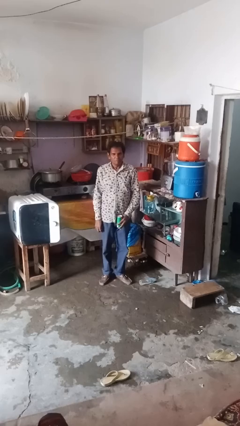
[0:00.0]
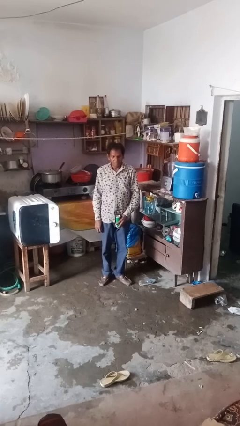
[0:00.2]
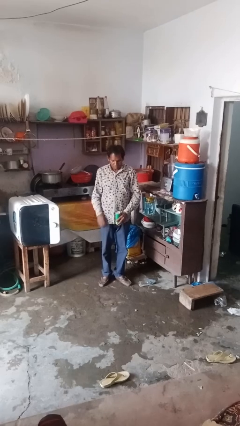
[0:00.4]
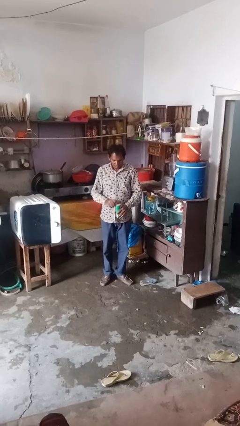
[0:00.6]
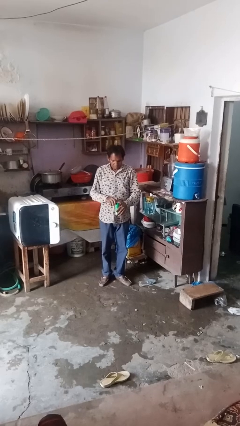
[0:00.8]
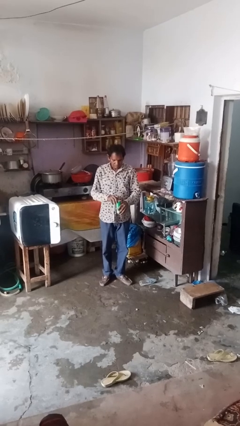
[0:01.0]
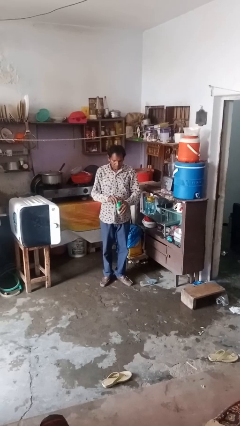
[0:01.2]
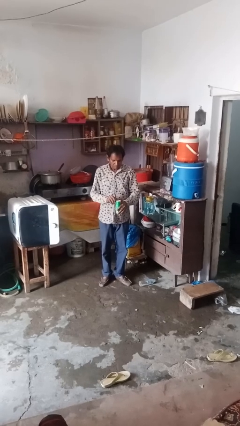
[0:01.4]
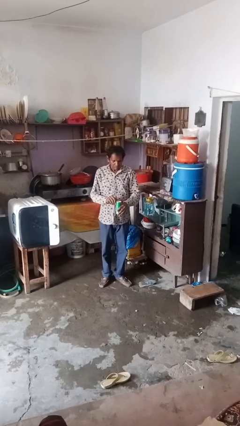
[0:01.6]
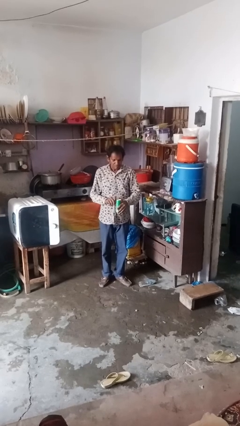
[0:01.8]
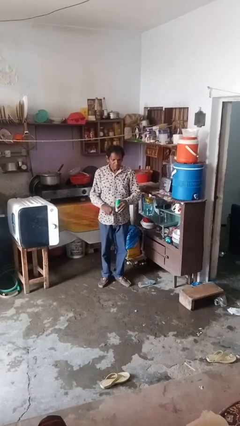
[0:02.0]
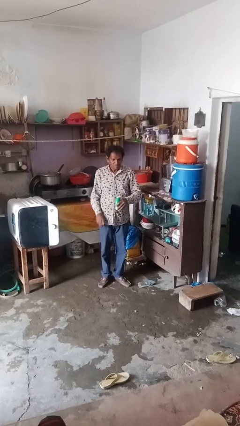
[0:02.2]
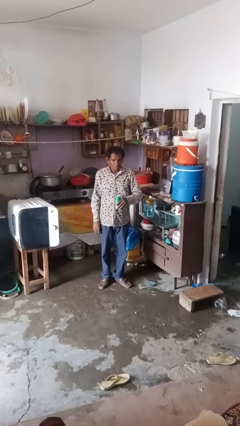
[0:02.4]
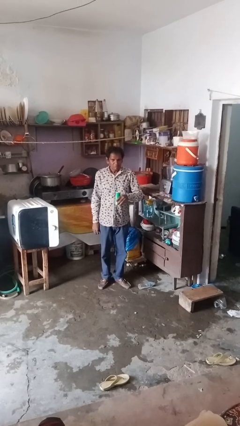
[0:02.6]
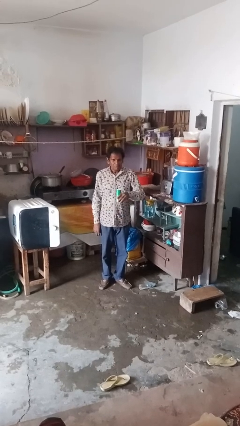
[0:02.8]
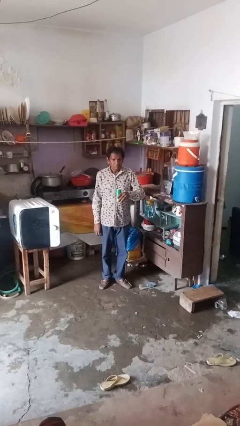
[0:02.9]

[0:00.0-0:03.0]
person opens beverage can

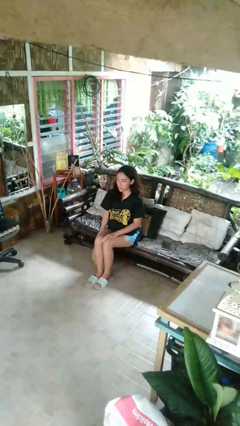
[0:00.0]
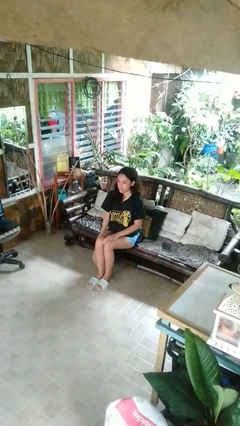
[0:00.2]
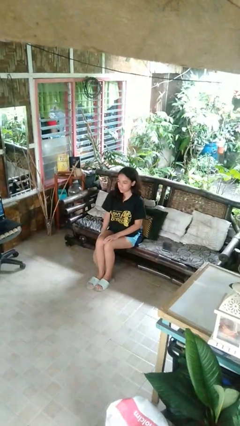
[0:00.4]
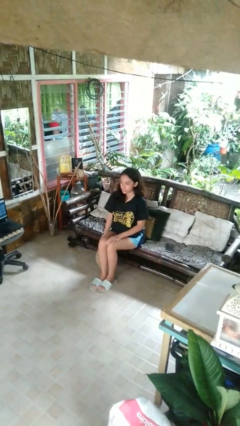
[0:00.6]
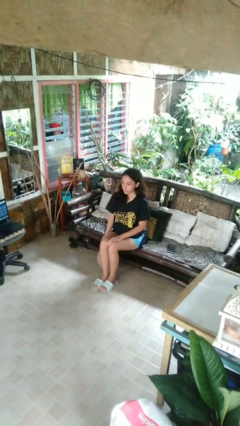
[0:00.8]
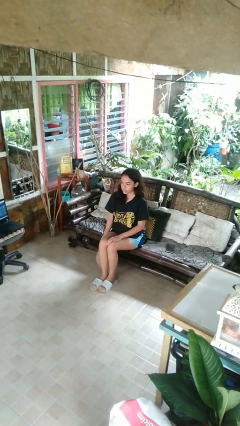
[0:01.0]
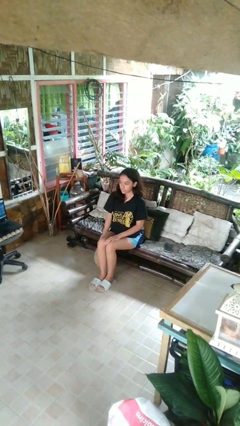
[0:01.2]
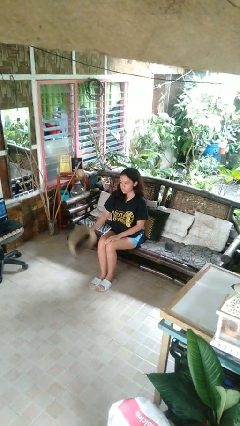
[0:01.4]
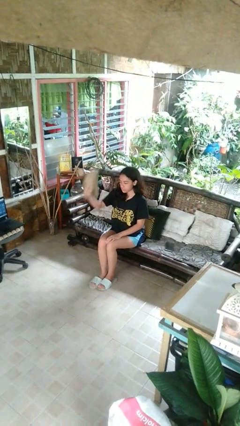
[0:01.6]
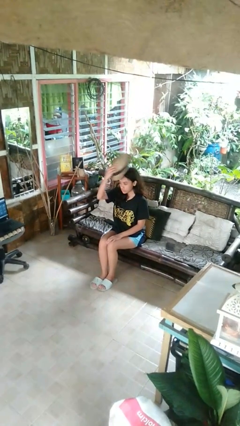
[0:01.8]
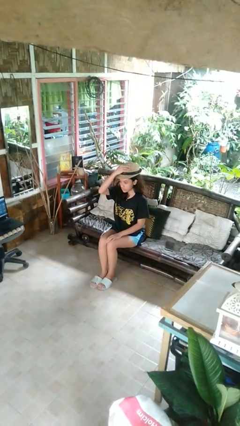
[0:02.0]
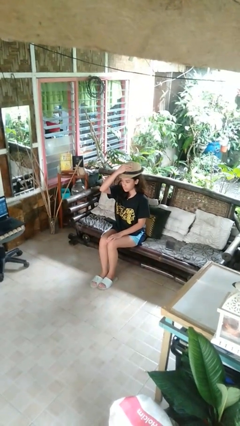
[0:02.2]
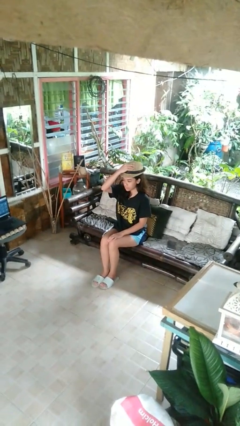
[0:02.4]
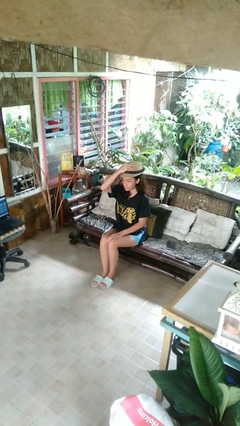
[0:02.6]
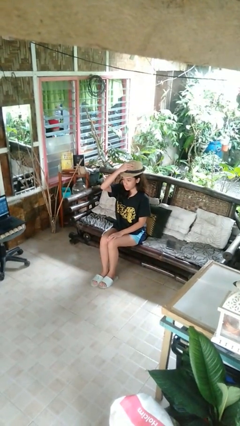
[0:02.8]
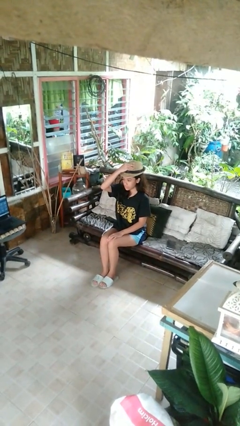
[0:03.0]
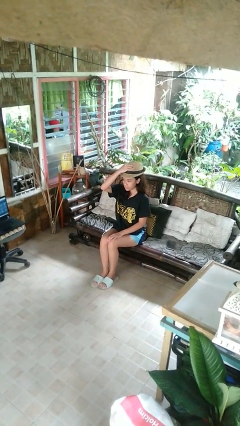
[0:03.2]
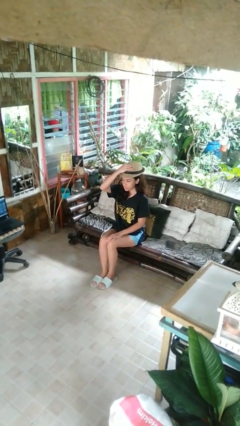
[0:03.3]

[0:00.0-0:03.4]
person puts on hat

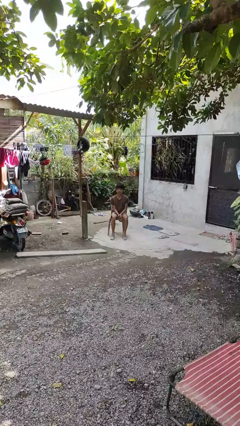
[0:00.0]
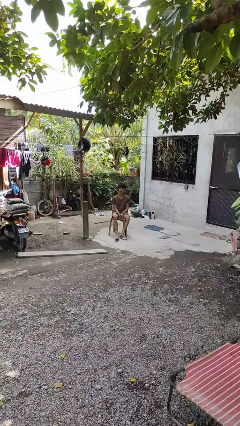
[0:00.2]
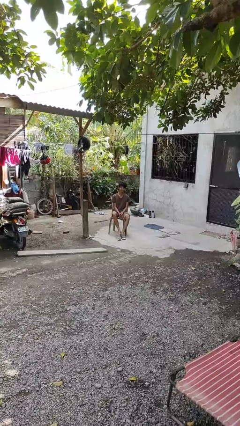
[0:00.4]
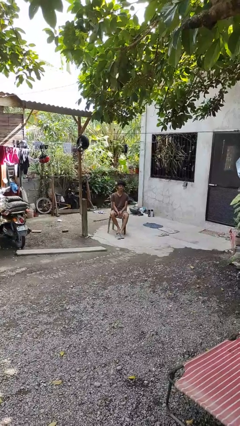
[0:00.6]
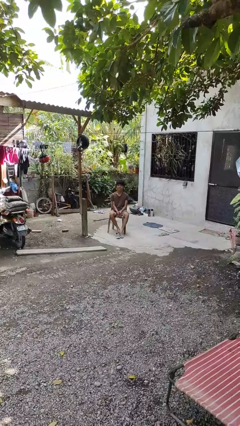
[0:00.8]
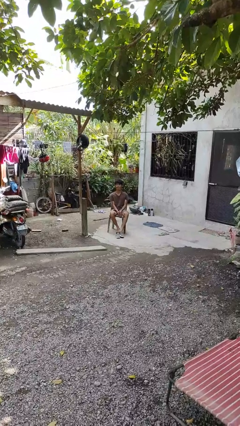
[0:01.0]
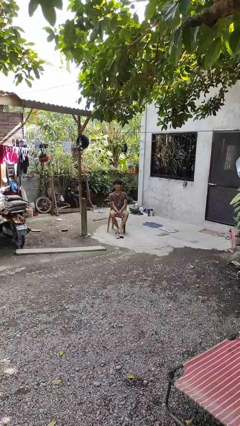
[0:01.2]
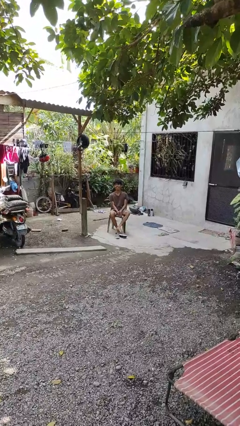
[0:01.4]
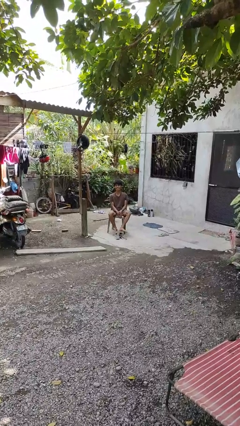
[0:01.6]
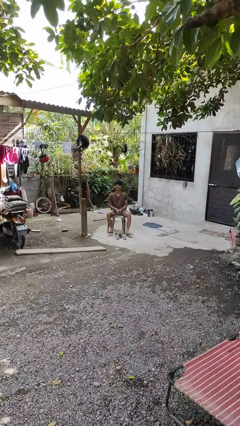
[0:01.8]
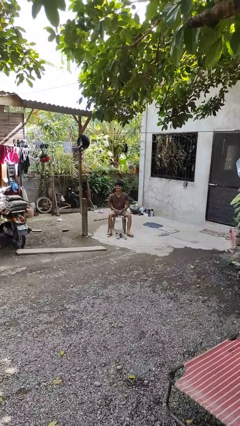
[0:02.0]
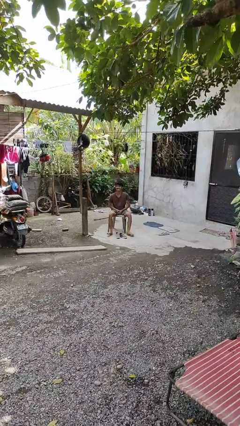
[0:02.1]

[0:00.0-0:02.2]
person takes off shoes

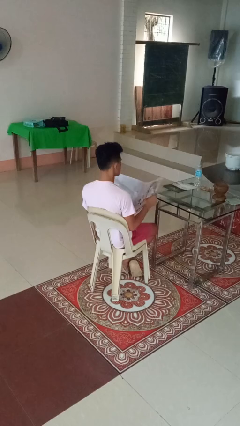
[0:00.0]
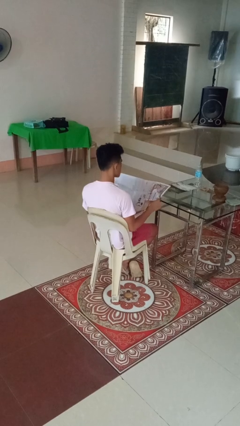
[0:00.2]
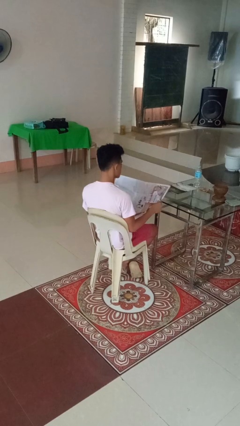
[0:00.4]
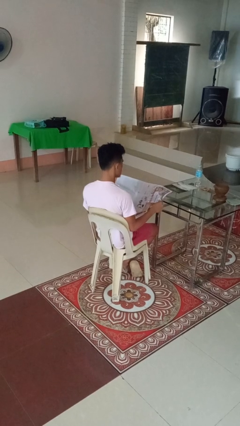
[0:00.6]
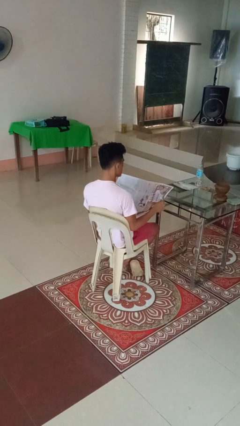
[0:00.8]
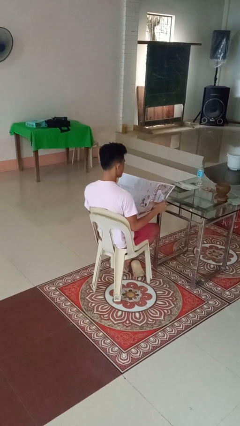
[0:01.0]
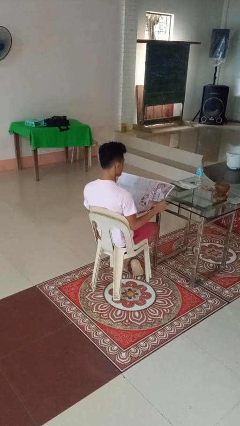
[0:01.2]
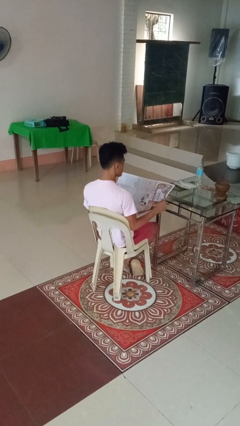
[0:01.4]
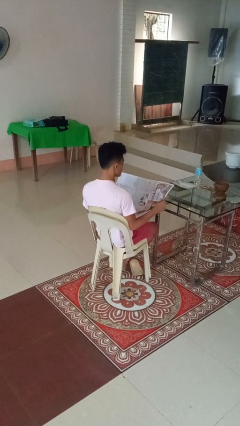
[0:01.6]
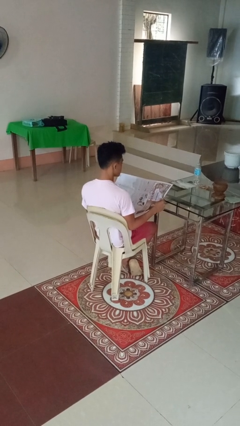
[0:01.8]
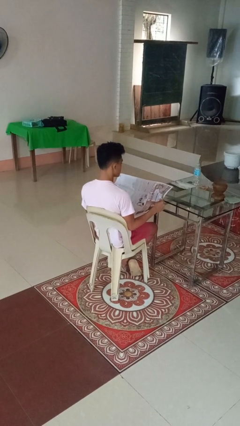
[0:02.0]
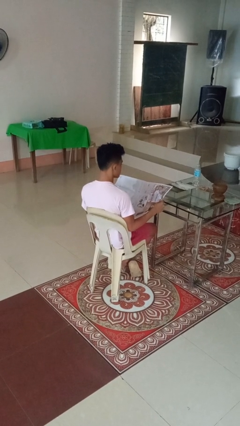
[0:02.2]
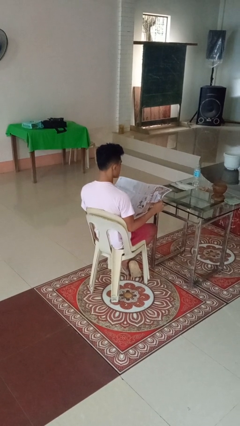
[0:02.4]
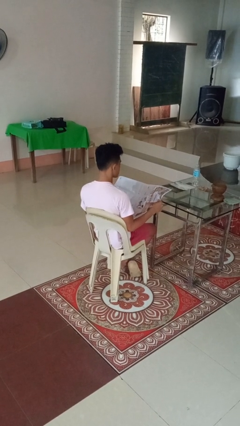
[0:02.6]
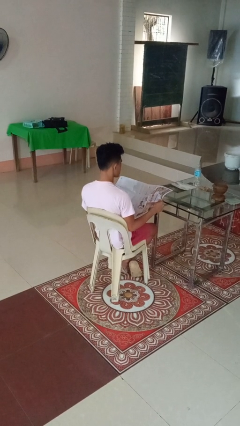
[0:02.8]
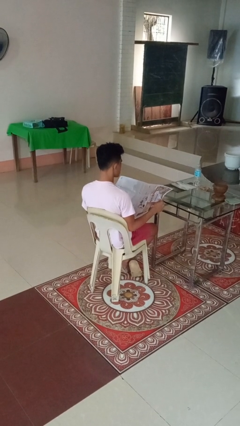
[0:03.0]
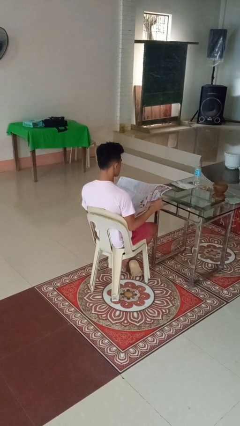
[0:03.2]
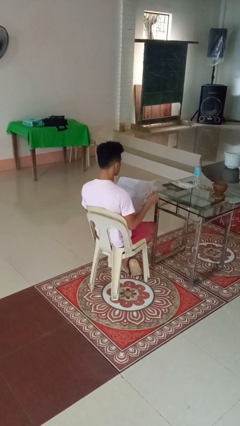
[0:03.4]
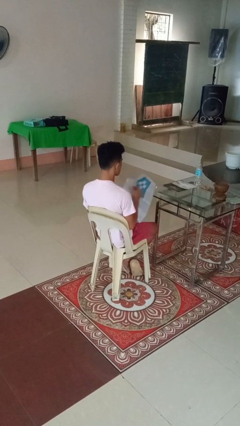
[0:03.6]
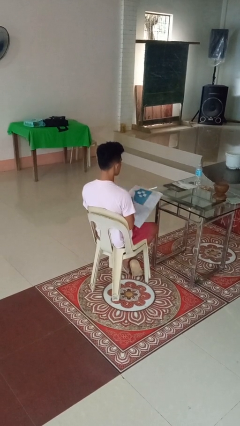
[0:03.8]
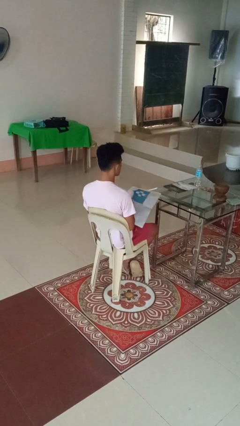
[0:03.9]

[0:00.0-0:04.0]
person reads newspaper

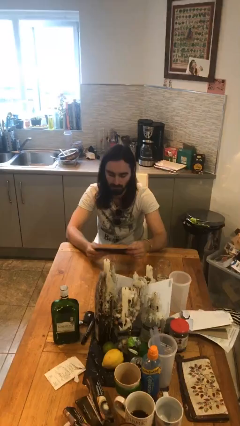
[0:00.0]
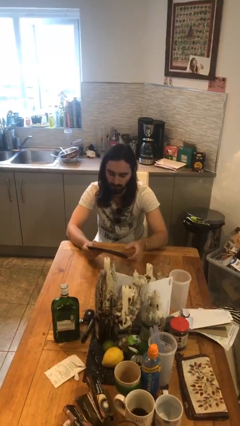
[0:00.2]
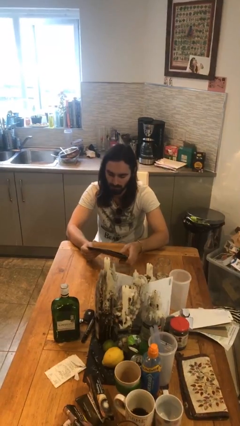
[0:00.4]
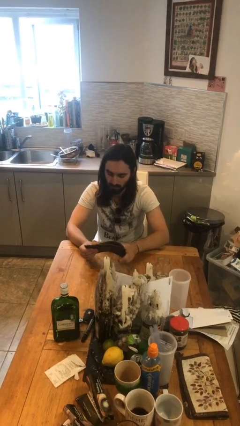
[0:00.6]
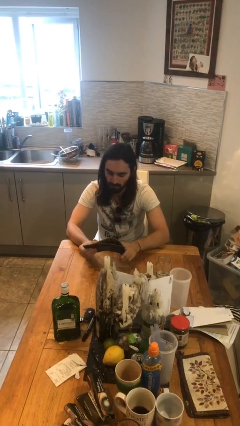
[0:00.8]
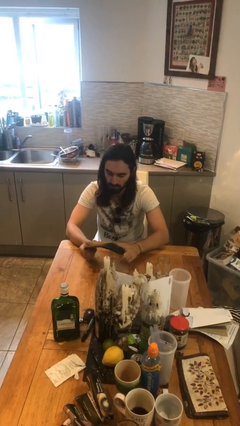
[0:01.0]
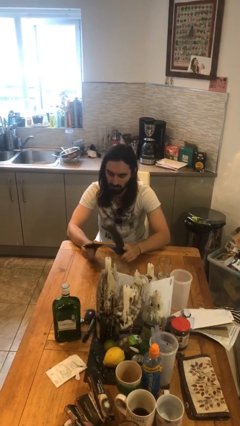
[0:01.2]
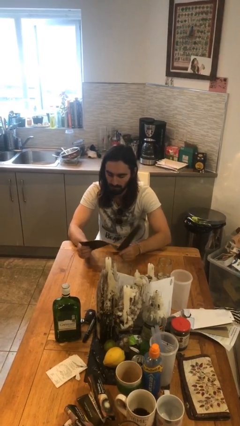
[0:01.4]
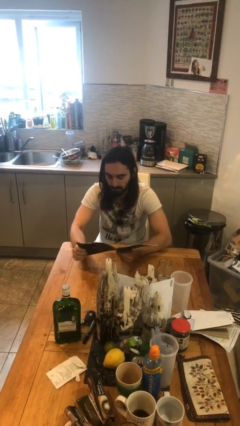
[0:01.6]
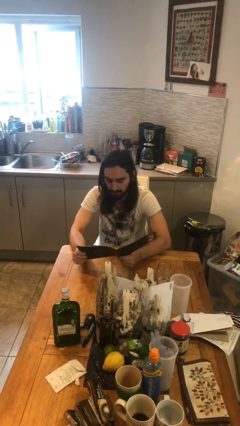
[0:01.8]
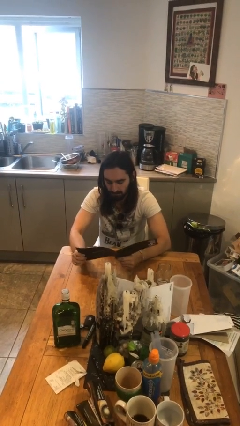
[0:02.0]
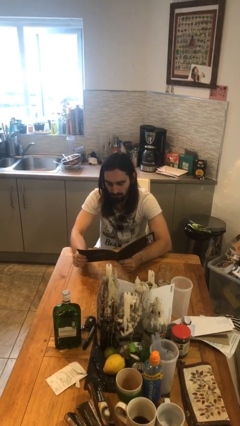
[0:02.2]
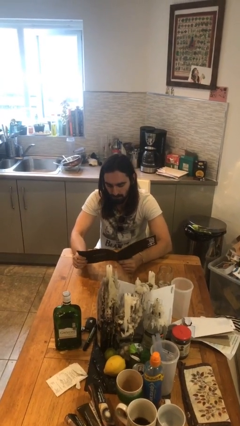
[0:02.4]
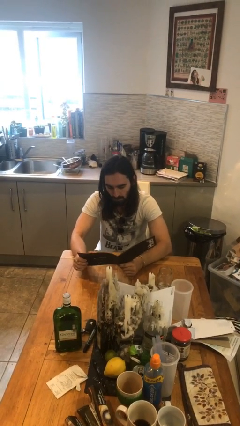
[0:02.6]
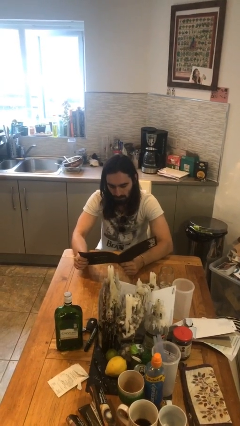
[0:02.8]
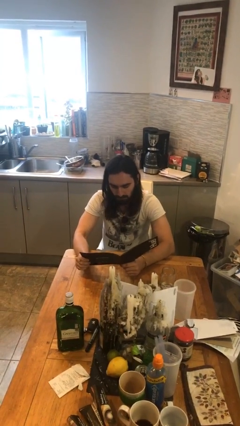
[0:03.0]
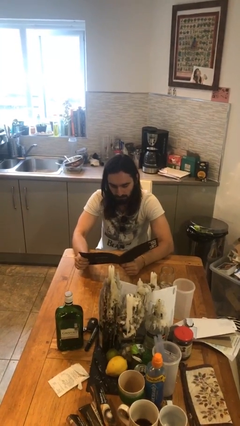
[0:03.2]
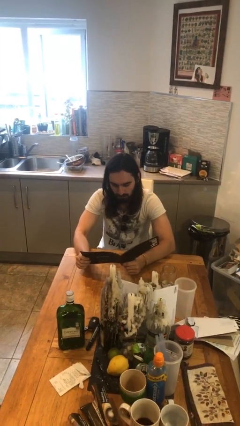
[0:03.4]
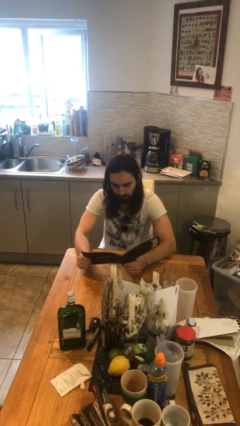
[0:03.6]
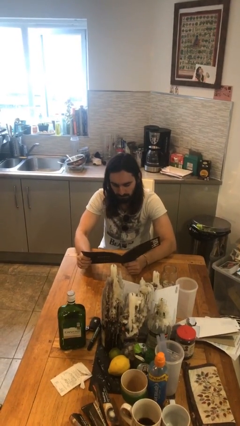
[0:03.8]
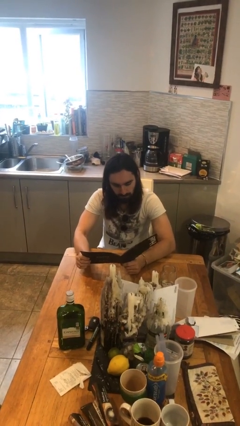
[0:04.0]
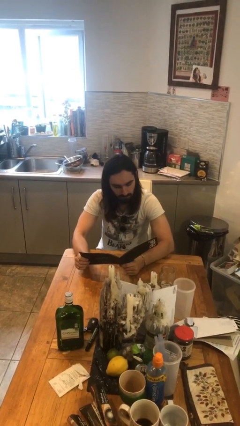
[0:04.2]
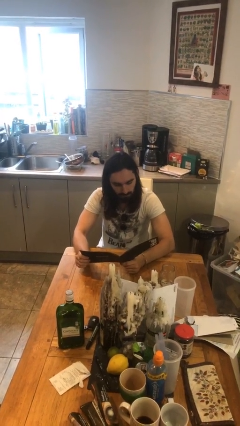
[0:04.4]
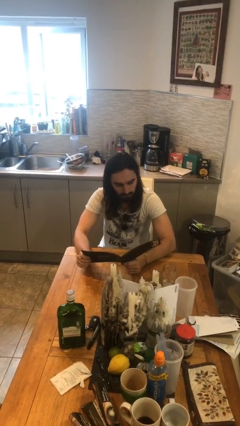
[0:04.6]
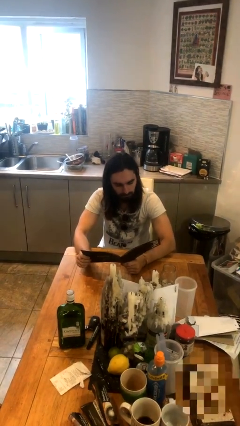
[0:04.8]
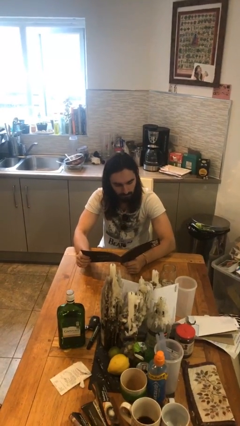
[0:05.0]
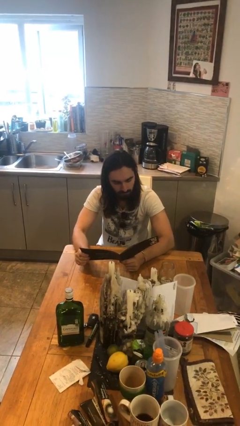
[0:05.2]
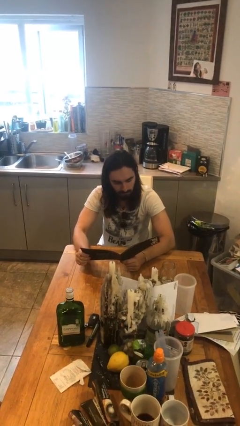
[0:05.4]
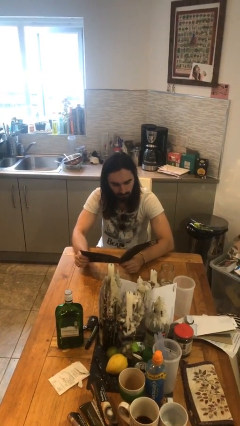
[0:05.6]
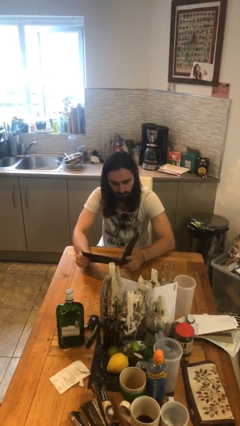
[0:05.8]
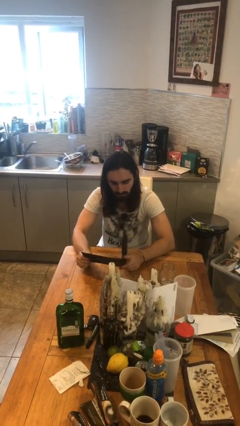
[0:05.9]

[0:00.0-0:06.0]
person reads document
